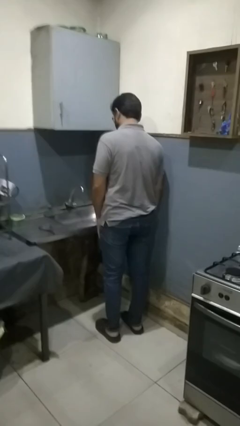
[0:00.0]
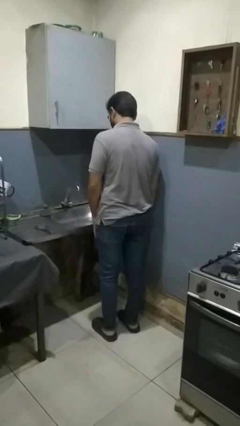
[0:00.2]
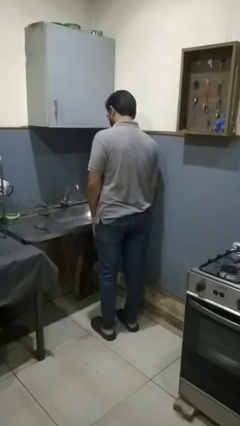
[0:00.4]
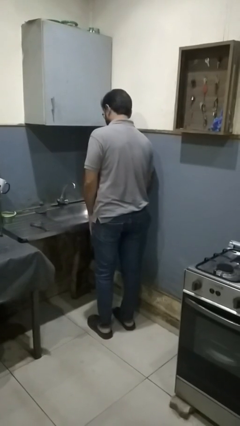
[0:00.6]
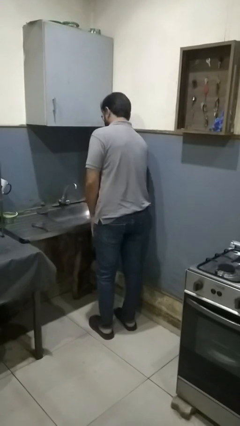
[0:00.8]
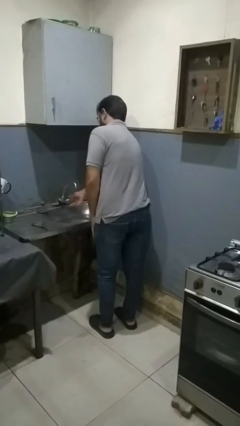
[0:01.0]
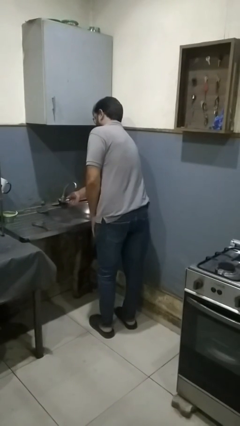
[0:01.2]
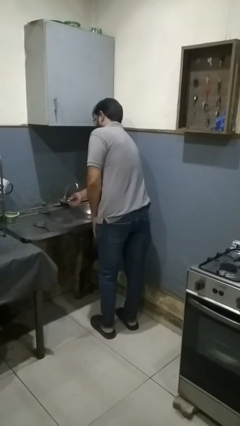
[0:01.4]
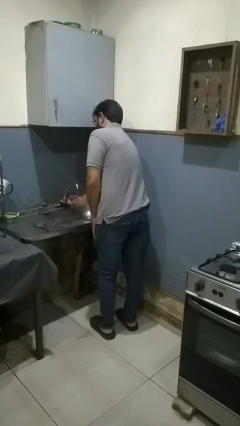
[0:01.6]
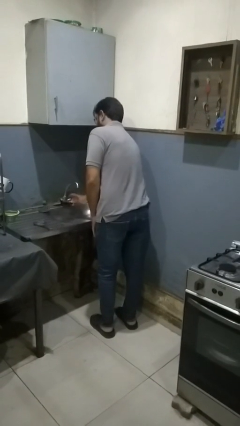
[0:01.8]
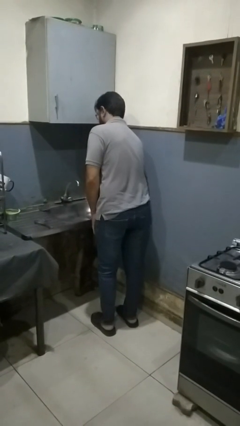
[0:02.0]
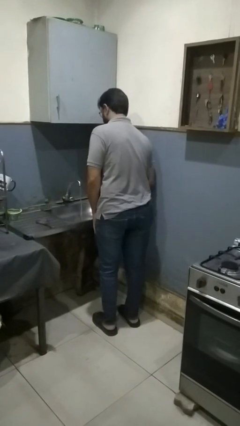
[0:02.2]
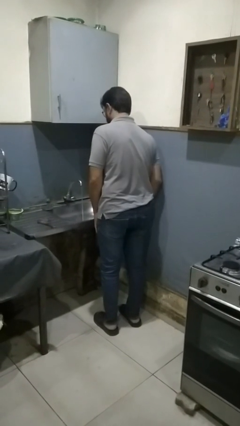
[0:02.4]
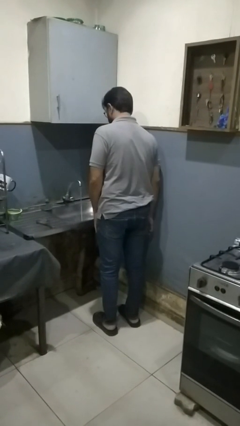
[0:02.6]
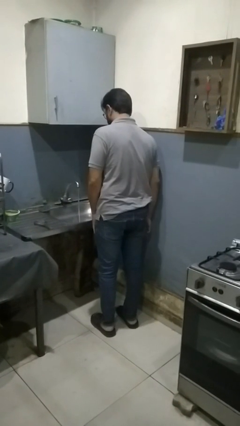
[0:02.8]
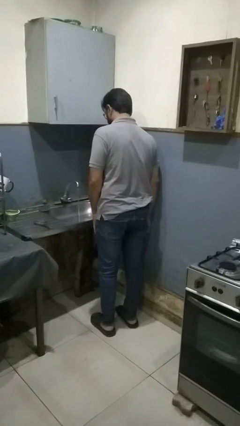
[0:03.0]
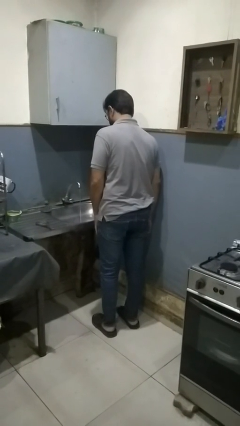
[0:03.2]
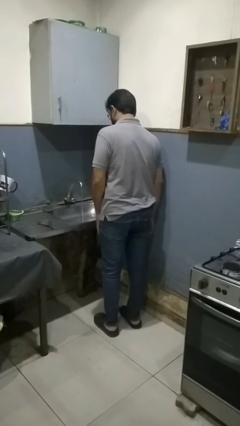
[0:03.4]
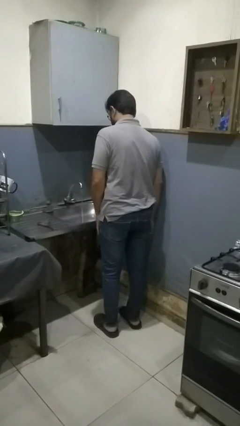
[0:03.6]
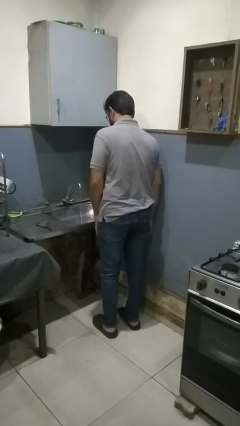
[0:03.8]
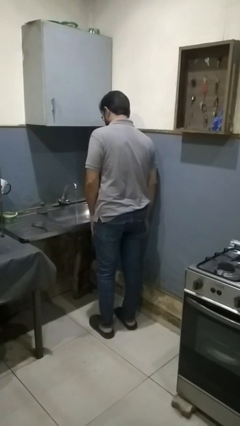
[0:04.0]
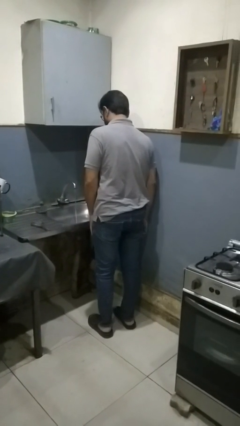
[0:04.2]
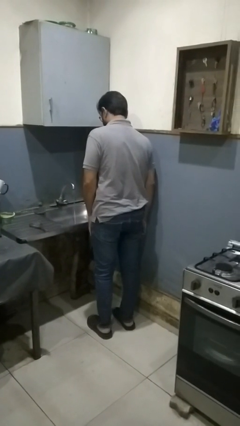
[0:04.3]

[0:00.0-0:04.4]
person turns on faucet

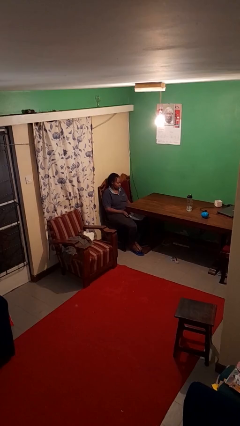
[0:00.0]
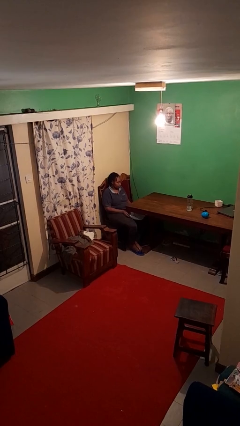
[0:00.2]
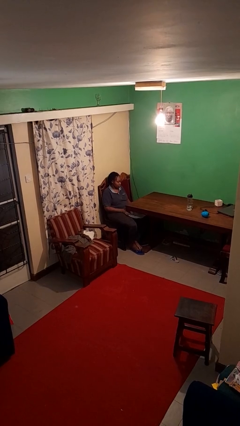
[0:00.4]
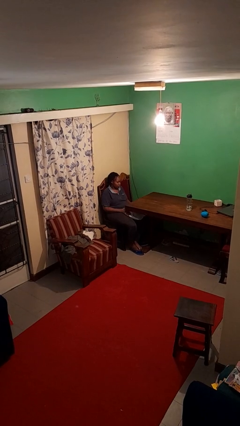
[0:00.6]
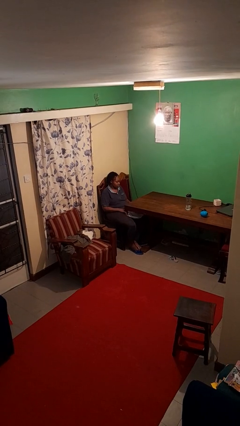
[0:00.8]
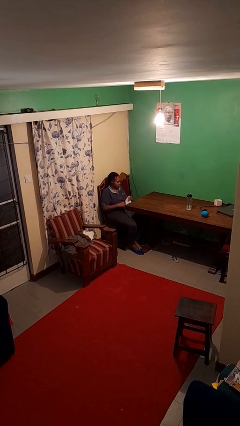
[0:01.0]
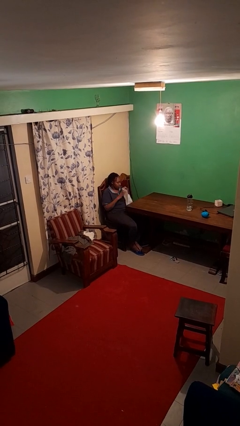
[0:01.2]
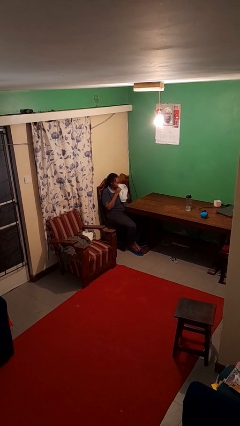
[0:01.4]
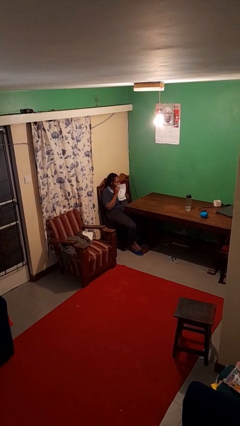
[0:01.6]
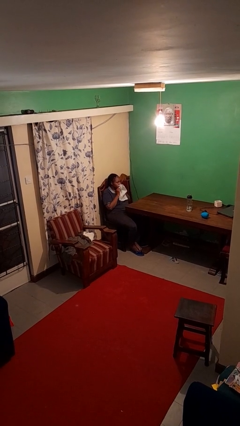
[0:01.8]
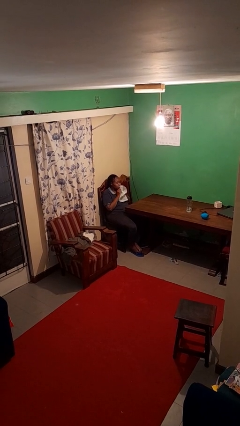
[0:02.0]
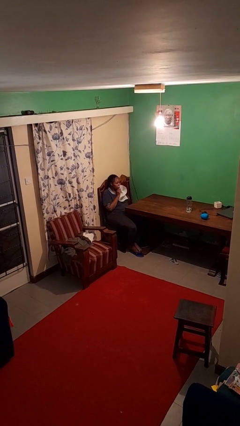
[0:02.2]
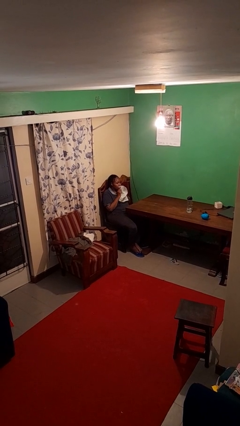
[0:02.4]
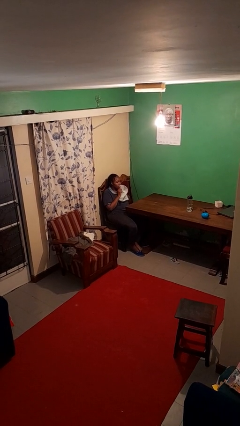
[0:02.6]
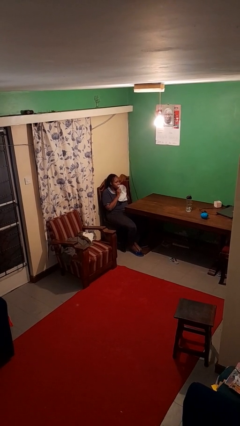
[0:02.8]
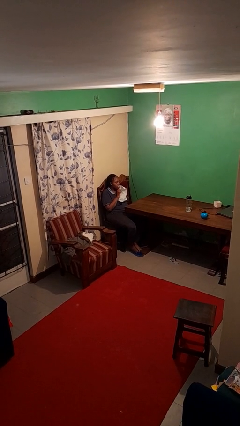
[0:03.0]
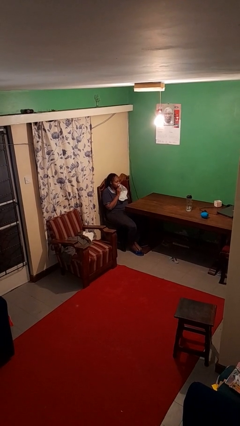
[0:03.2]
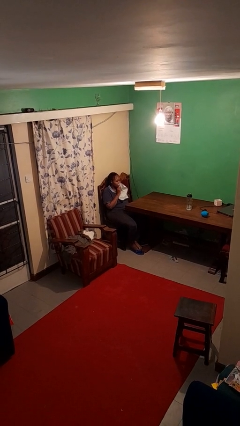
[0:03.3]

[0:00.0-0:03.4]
person wipes mouth with napkin

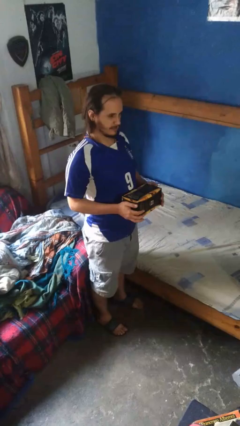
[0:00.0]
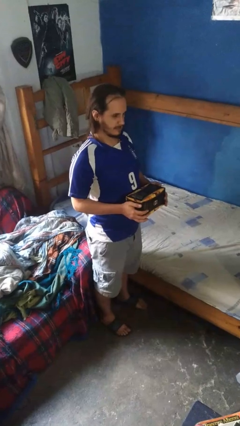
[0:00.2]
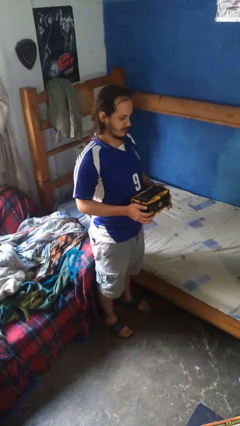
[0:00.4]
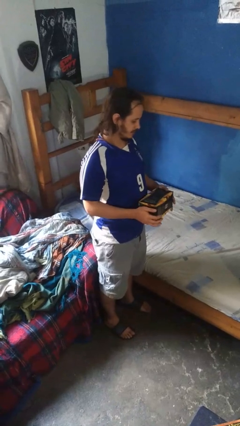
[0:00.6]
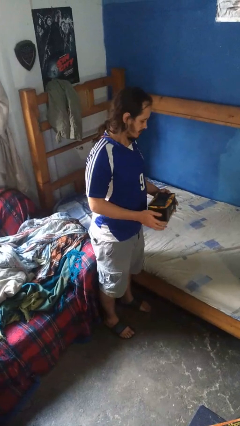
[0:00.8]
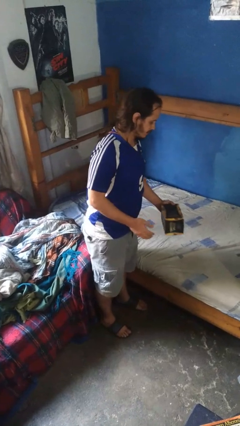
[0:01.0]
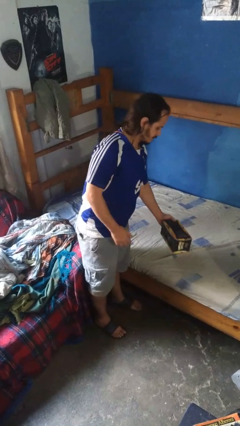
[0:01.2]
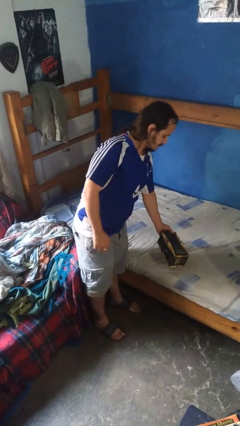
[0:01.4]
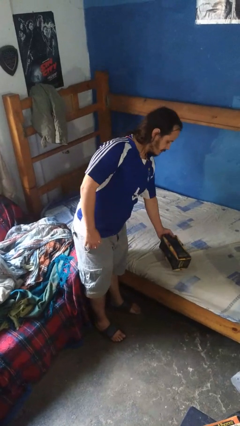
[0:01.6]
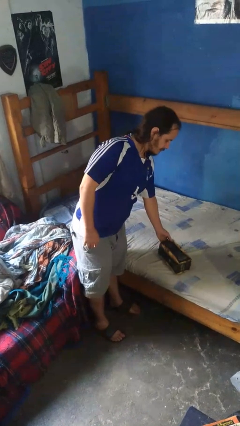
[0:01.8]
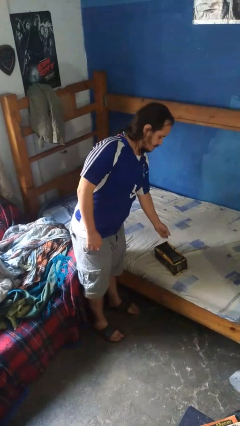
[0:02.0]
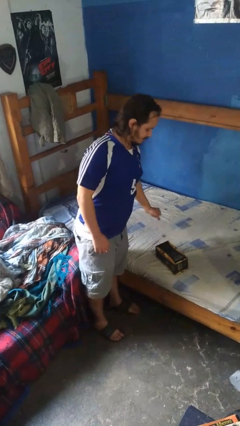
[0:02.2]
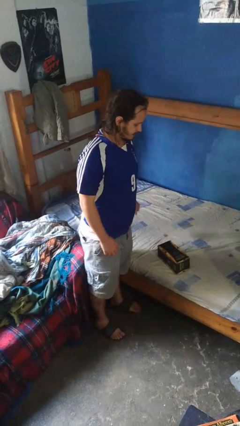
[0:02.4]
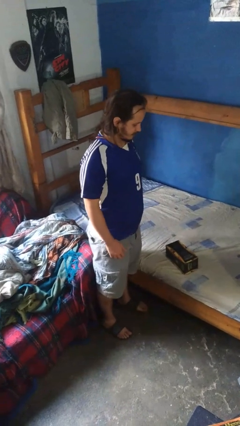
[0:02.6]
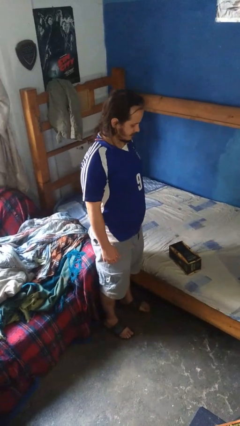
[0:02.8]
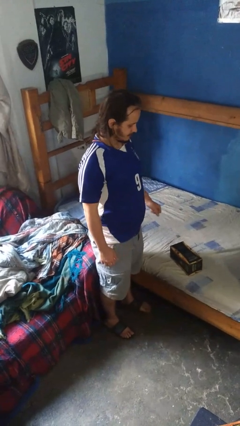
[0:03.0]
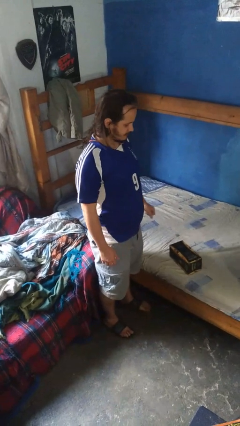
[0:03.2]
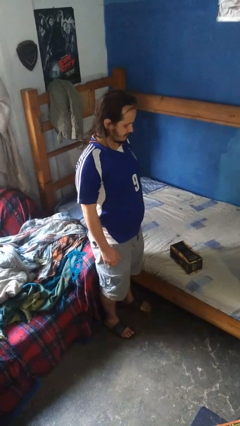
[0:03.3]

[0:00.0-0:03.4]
person puts down object on bed

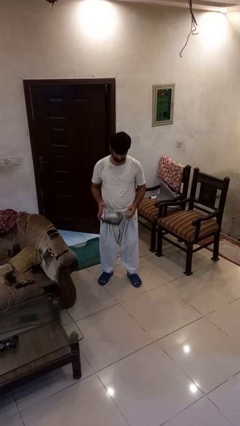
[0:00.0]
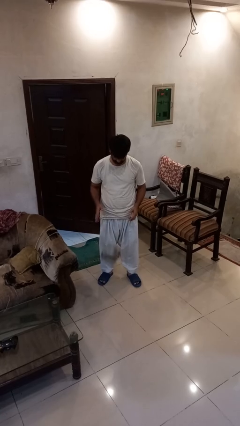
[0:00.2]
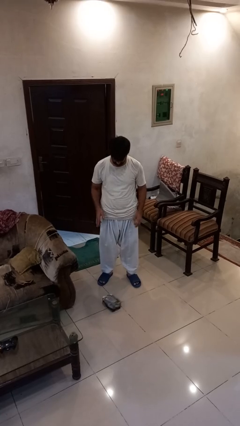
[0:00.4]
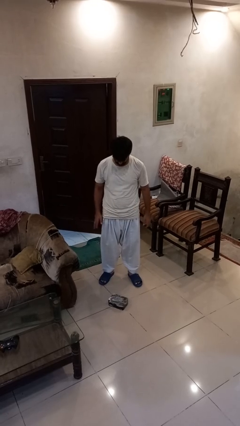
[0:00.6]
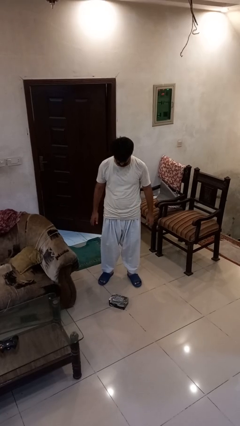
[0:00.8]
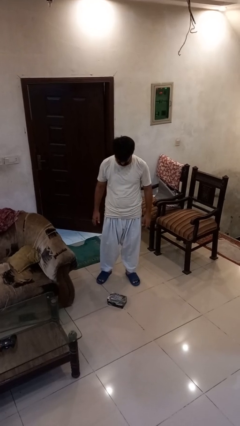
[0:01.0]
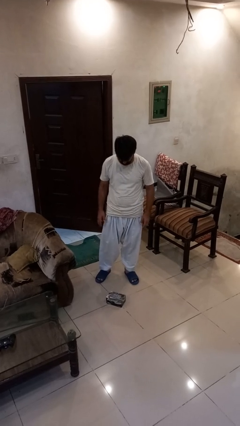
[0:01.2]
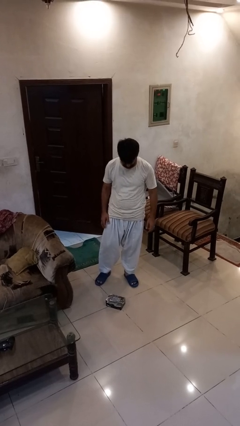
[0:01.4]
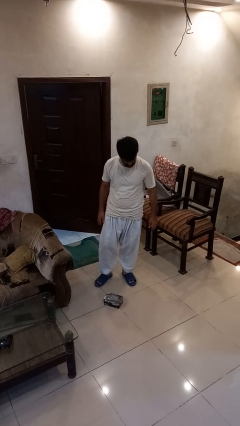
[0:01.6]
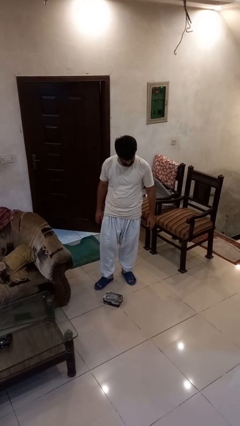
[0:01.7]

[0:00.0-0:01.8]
person drops object

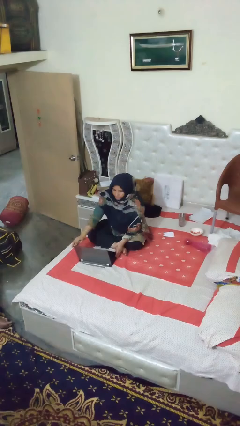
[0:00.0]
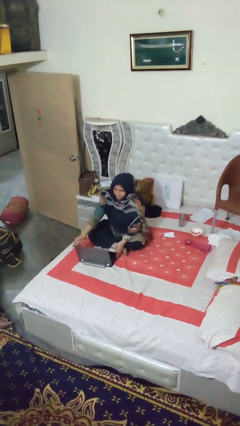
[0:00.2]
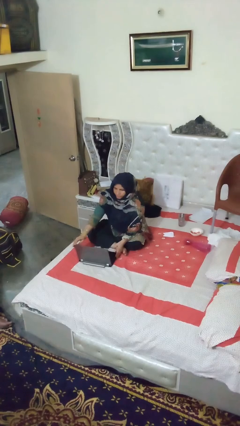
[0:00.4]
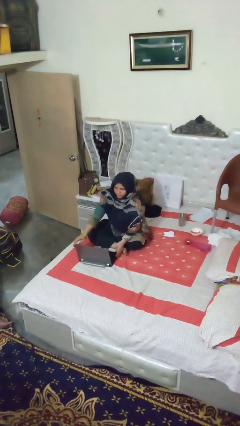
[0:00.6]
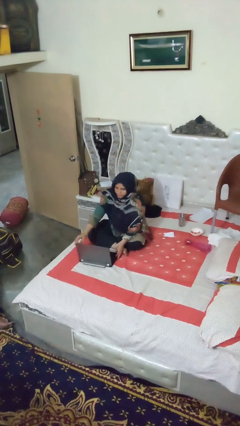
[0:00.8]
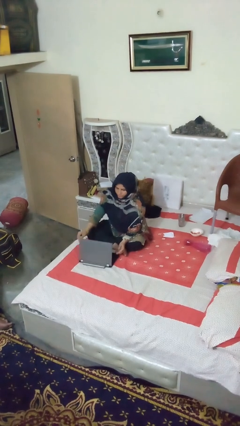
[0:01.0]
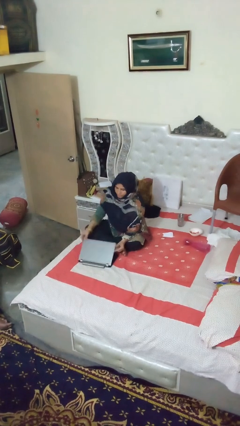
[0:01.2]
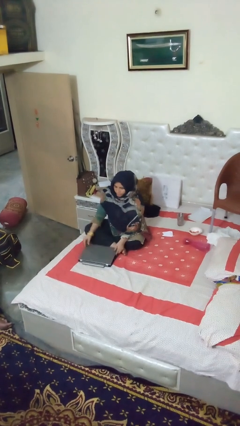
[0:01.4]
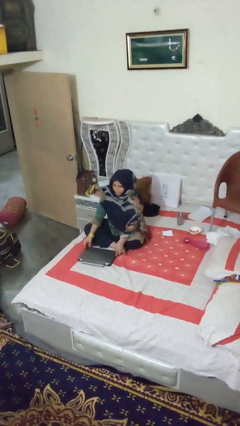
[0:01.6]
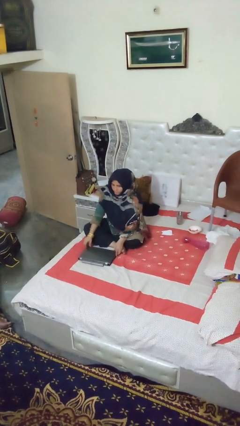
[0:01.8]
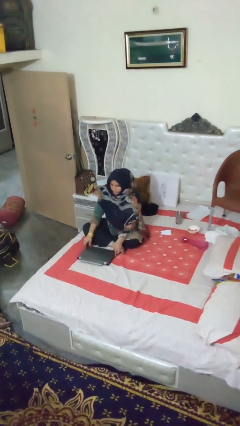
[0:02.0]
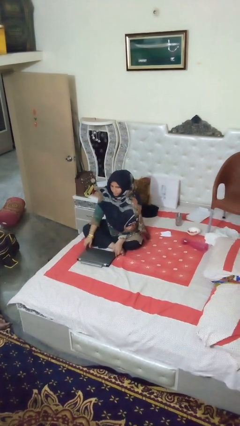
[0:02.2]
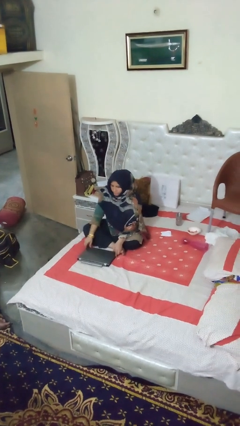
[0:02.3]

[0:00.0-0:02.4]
person closes laptop

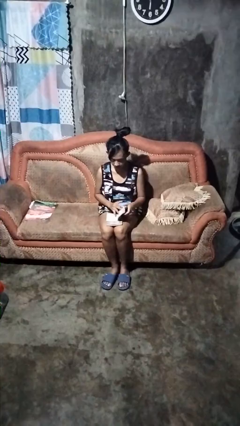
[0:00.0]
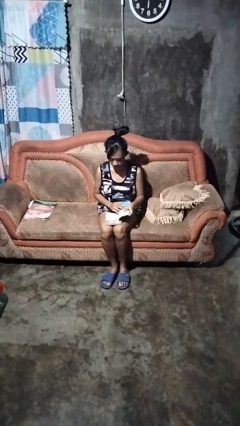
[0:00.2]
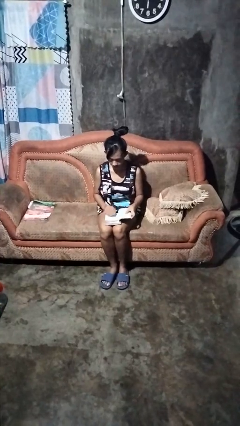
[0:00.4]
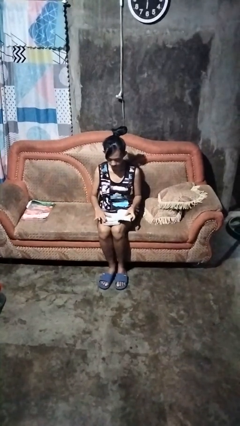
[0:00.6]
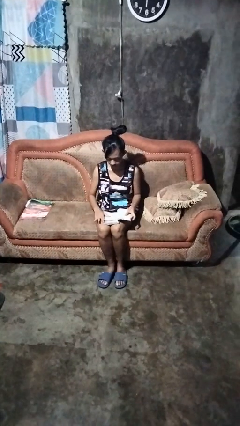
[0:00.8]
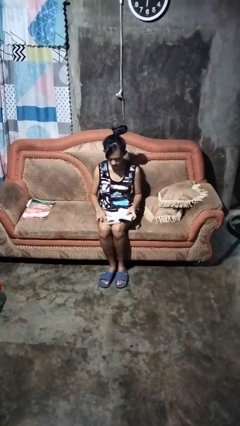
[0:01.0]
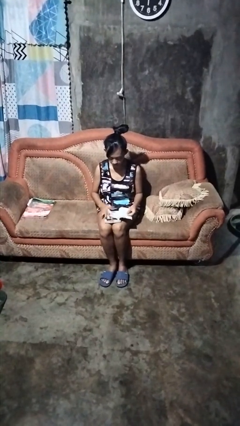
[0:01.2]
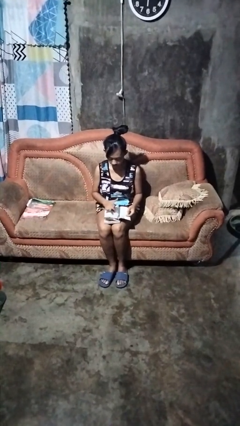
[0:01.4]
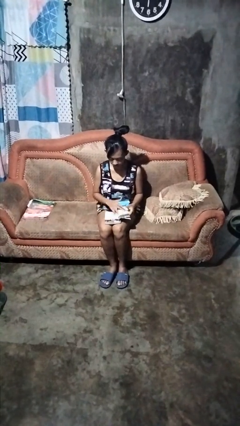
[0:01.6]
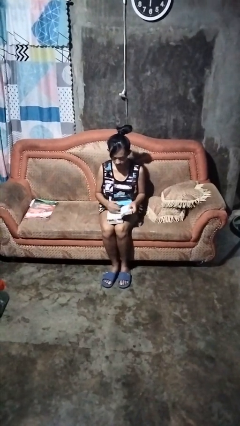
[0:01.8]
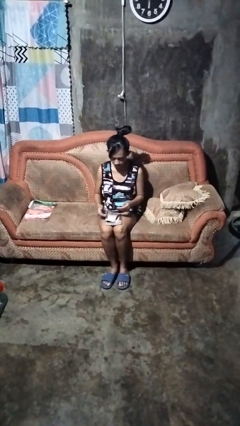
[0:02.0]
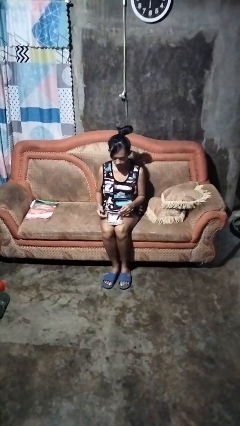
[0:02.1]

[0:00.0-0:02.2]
person reads book
